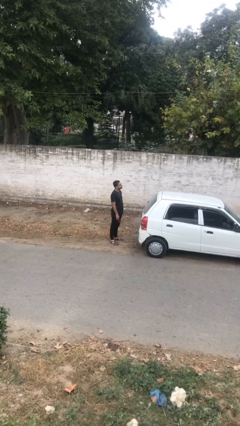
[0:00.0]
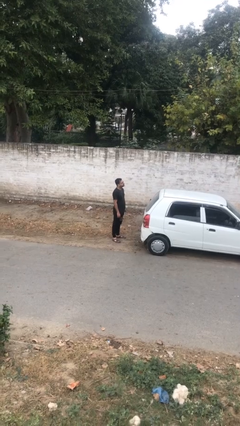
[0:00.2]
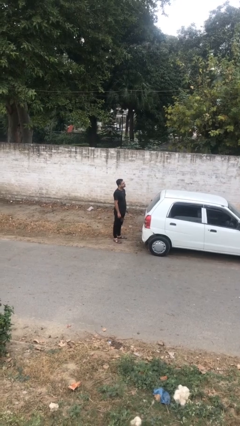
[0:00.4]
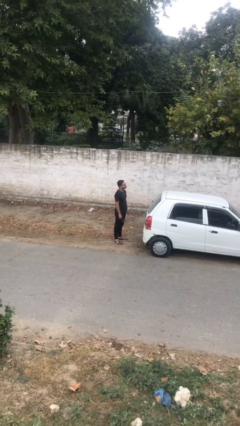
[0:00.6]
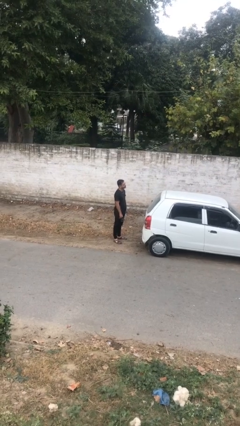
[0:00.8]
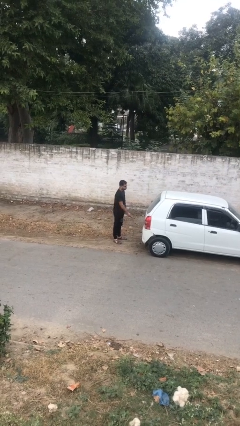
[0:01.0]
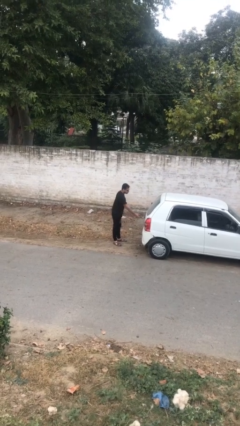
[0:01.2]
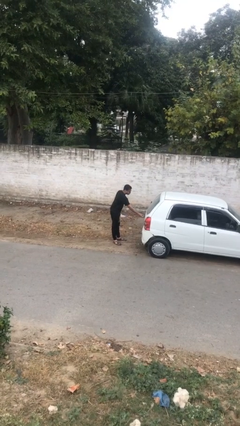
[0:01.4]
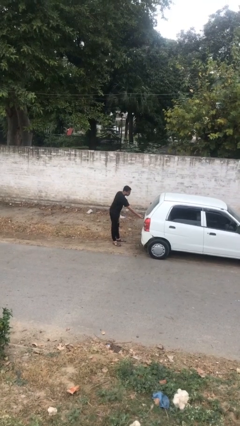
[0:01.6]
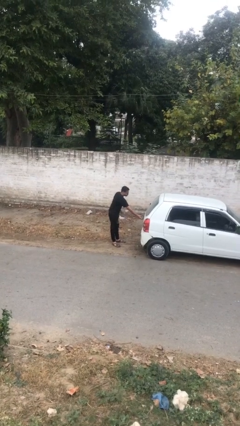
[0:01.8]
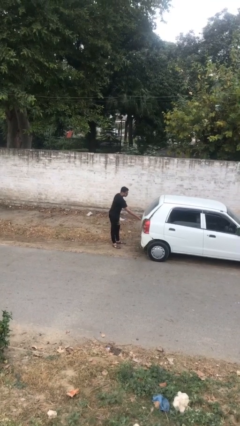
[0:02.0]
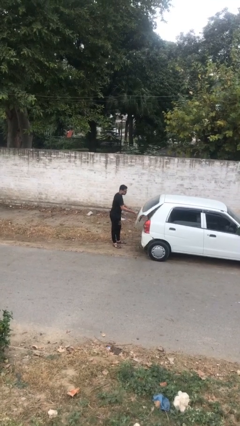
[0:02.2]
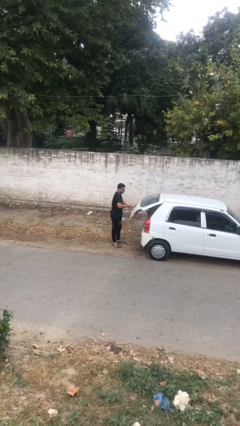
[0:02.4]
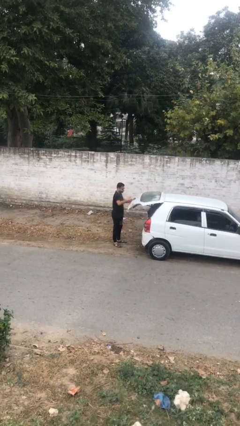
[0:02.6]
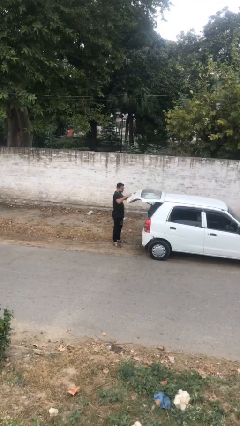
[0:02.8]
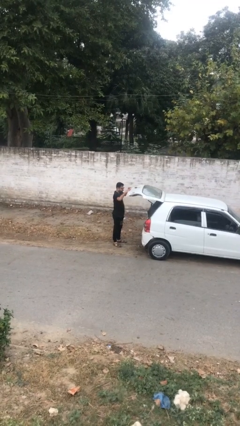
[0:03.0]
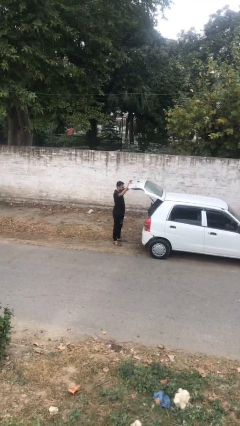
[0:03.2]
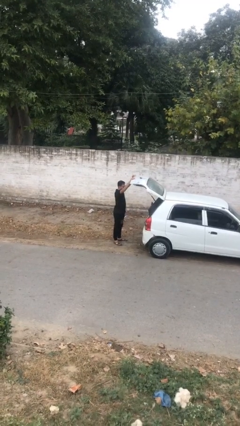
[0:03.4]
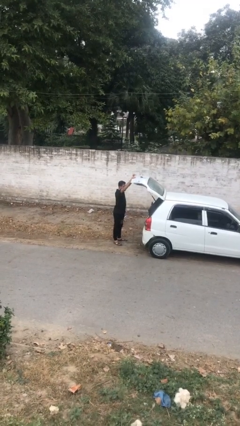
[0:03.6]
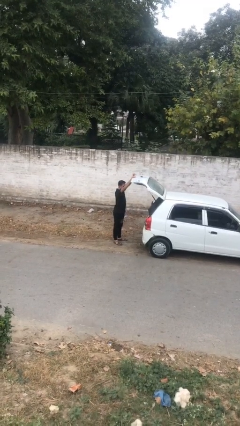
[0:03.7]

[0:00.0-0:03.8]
person opens car trunk

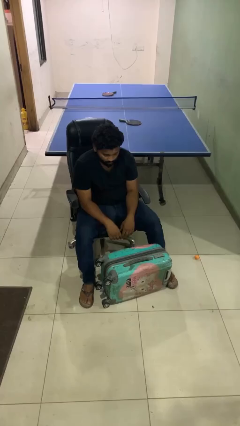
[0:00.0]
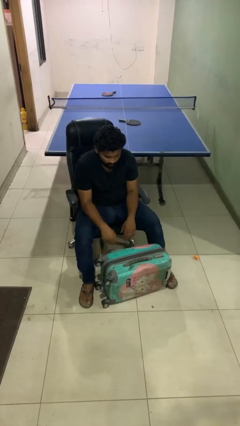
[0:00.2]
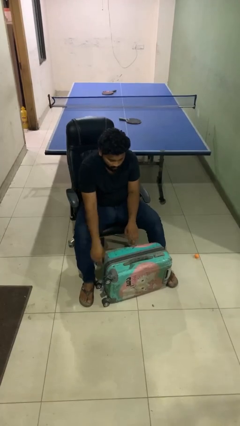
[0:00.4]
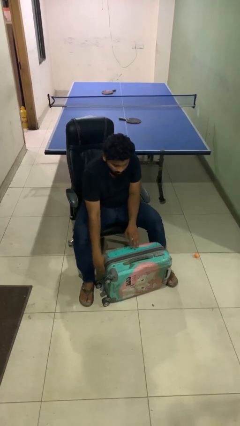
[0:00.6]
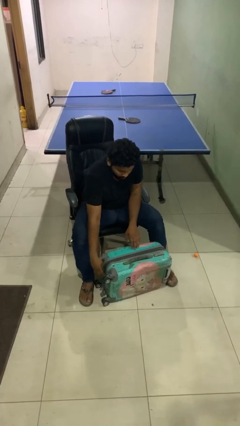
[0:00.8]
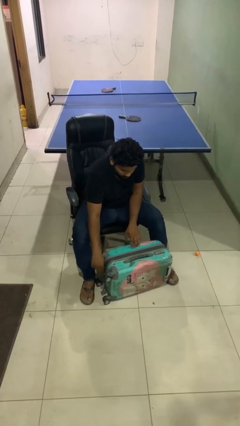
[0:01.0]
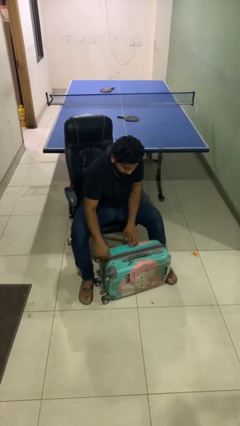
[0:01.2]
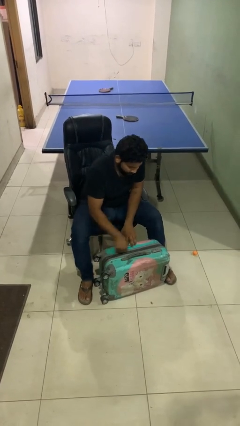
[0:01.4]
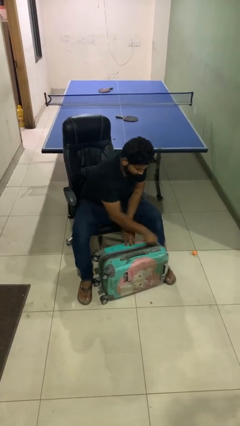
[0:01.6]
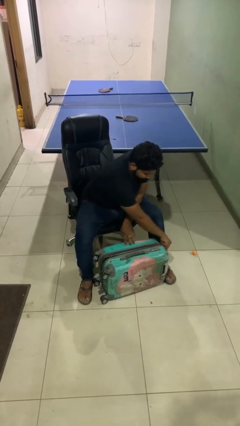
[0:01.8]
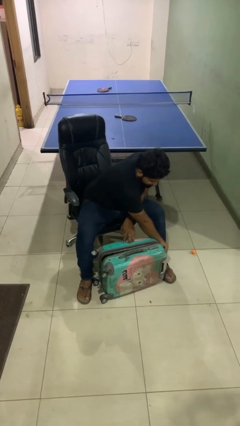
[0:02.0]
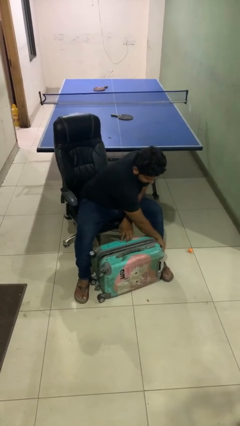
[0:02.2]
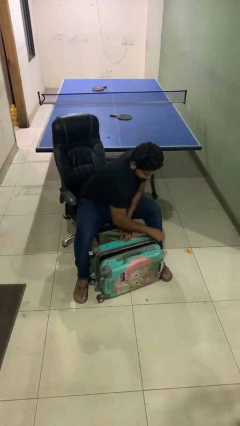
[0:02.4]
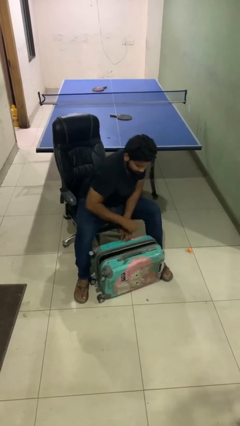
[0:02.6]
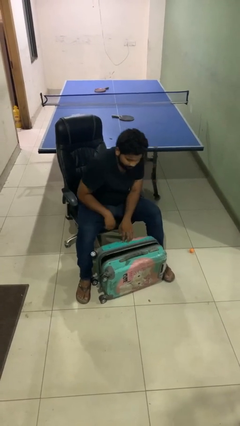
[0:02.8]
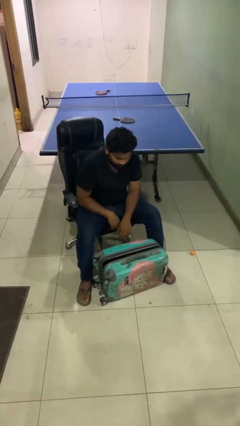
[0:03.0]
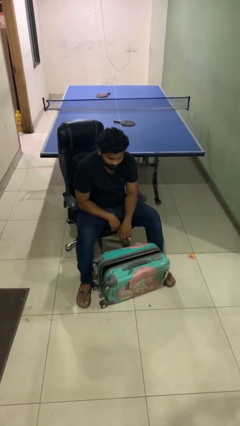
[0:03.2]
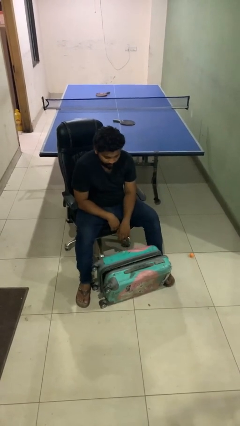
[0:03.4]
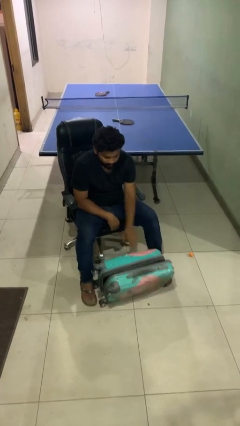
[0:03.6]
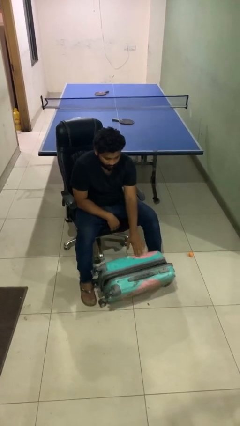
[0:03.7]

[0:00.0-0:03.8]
person opens suitcase

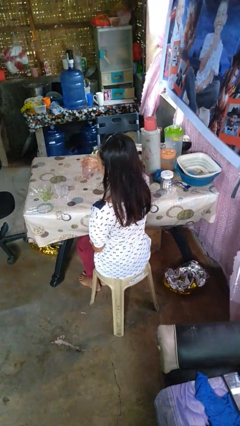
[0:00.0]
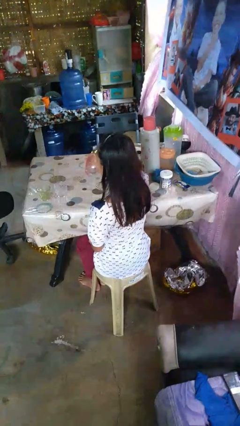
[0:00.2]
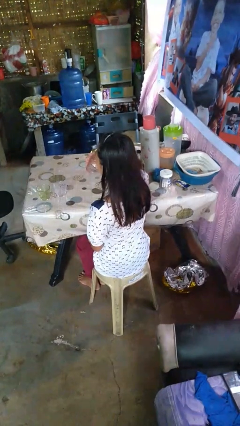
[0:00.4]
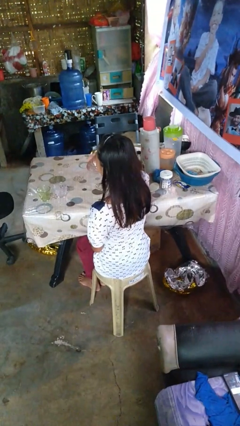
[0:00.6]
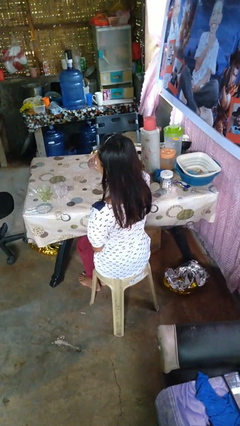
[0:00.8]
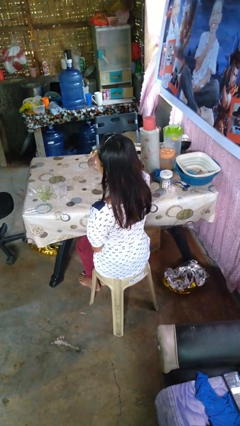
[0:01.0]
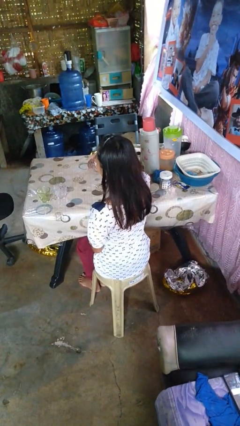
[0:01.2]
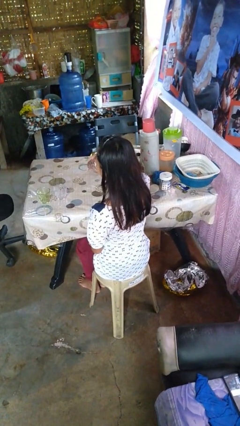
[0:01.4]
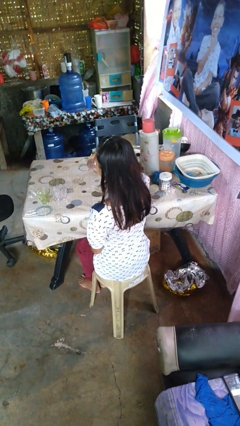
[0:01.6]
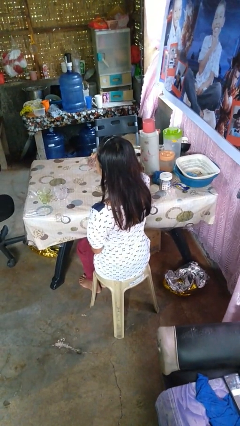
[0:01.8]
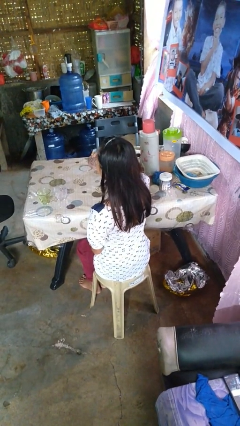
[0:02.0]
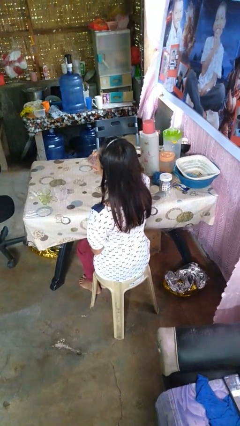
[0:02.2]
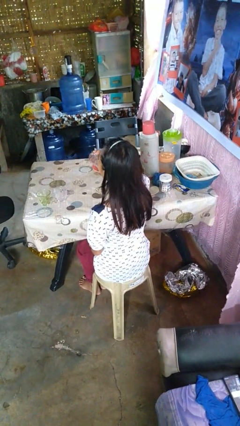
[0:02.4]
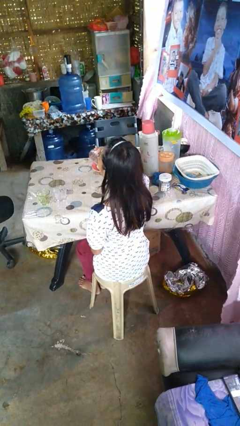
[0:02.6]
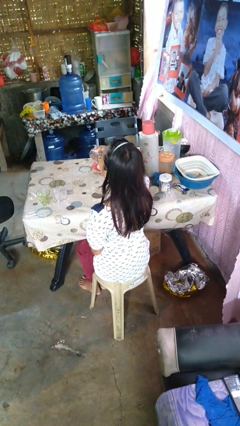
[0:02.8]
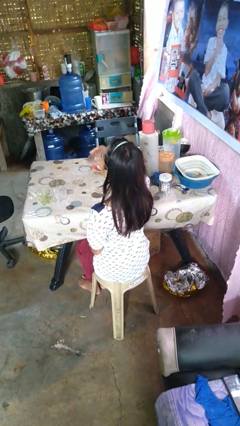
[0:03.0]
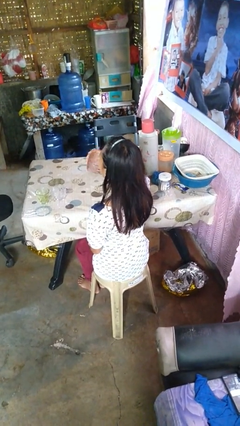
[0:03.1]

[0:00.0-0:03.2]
person drinks from shotglass

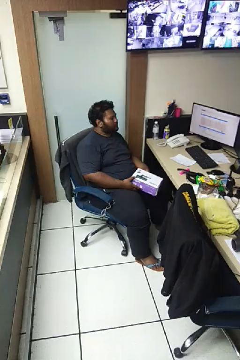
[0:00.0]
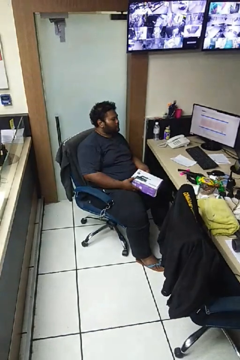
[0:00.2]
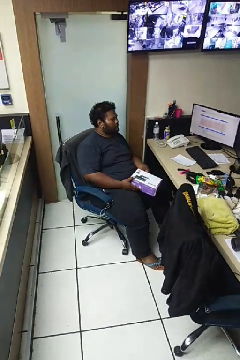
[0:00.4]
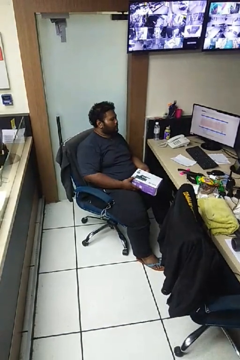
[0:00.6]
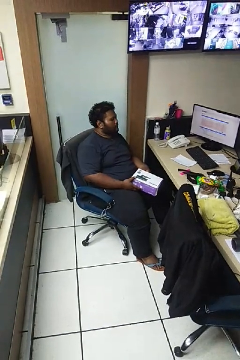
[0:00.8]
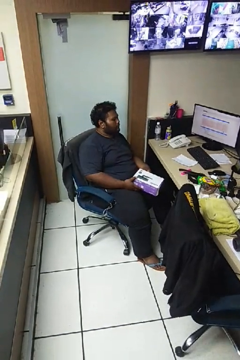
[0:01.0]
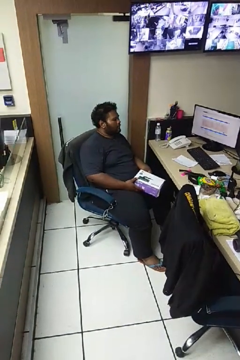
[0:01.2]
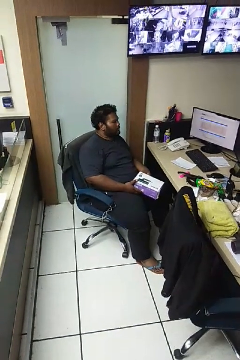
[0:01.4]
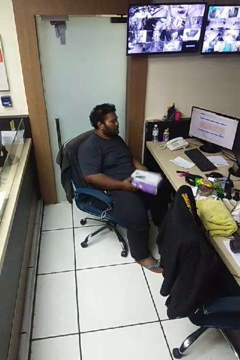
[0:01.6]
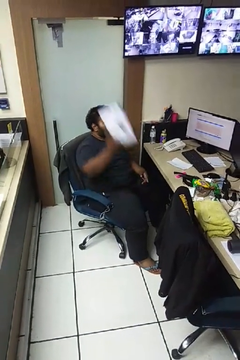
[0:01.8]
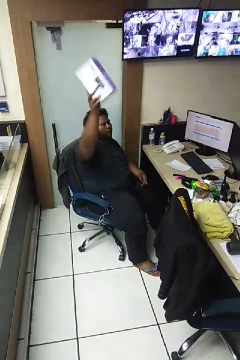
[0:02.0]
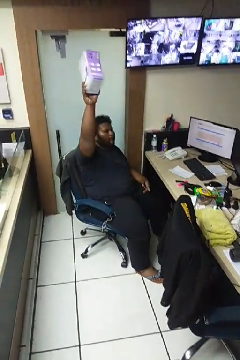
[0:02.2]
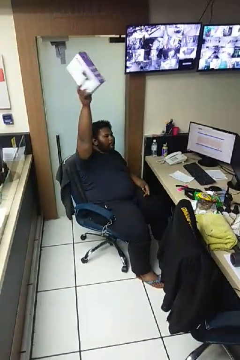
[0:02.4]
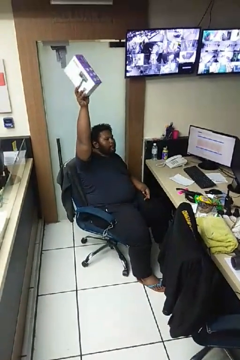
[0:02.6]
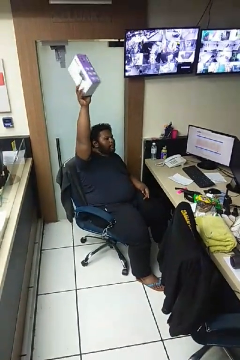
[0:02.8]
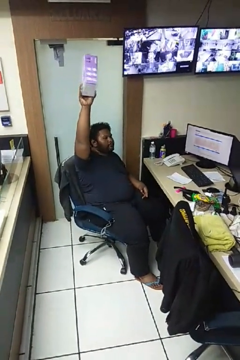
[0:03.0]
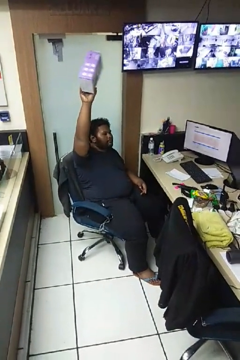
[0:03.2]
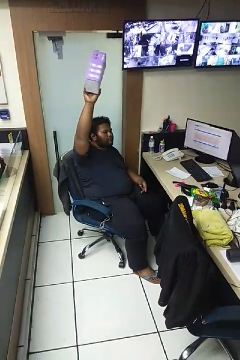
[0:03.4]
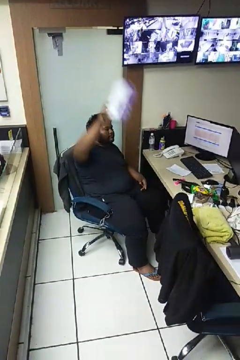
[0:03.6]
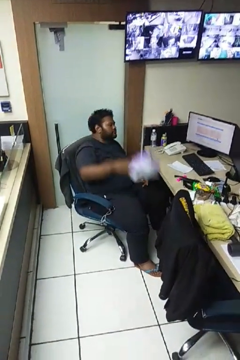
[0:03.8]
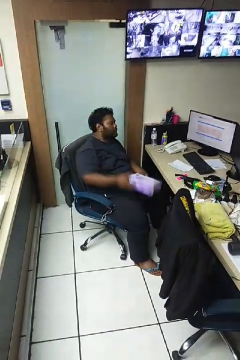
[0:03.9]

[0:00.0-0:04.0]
person holds object above head

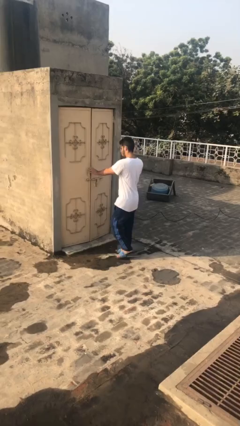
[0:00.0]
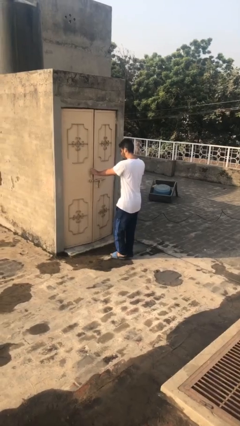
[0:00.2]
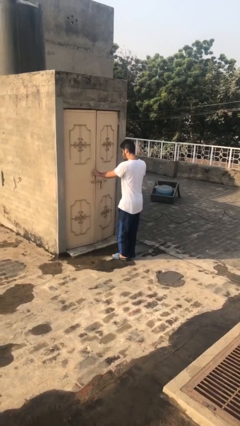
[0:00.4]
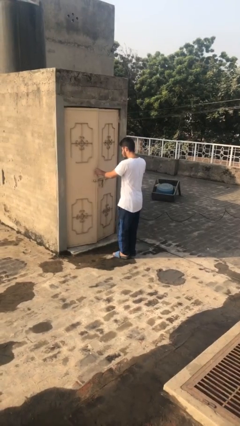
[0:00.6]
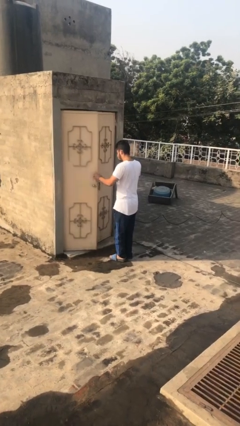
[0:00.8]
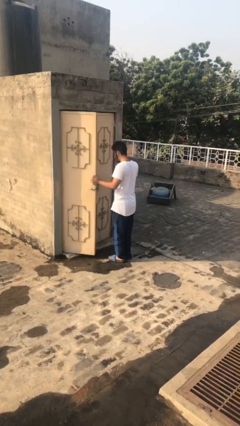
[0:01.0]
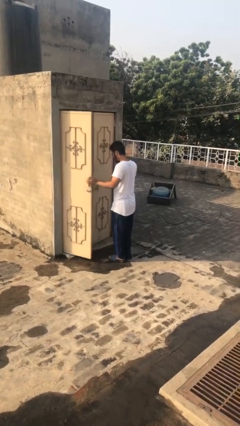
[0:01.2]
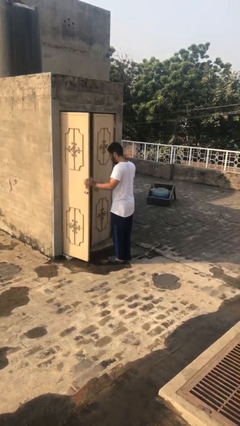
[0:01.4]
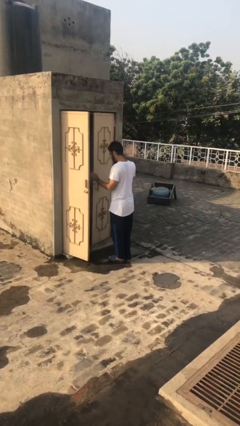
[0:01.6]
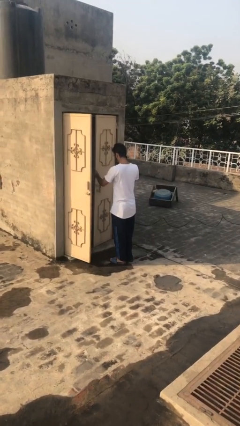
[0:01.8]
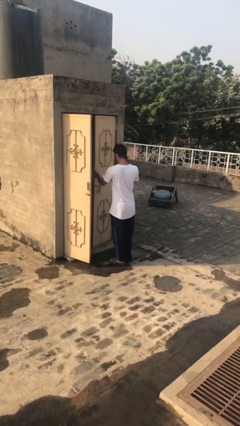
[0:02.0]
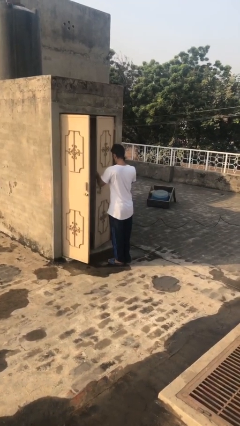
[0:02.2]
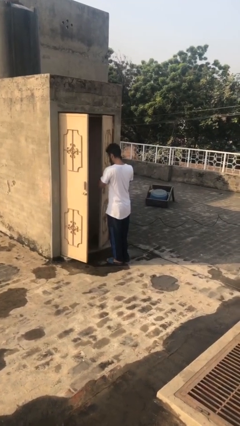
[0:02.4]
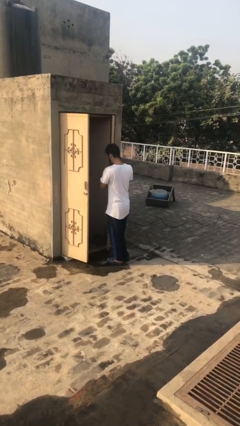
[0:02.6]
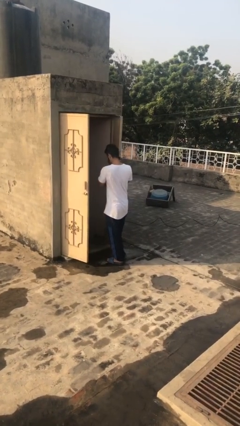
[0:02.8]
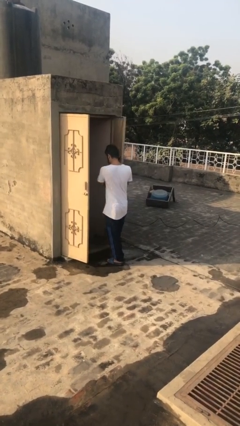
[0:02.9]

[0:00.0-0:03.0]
person opens facility door

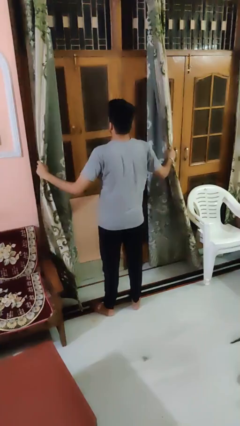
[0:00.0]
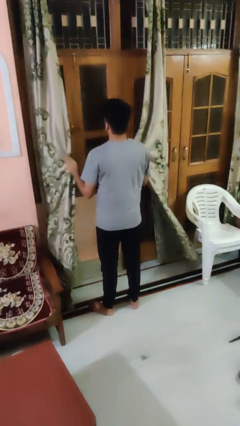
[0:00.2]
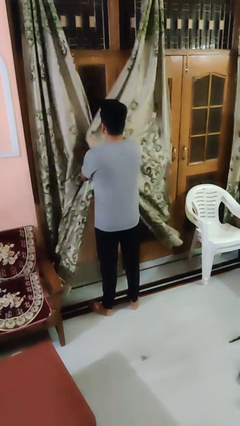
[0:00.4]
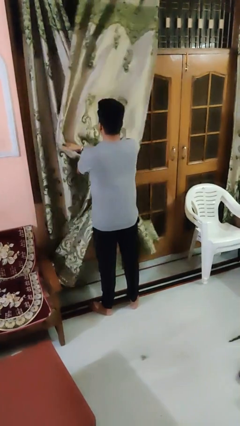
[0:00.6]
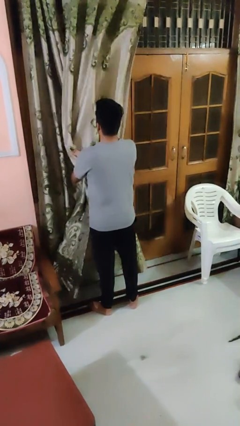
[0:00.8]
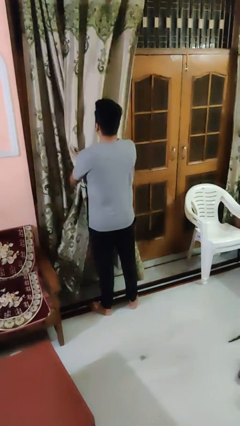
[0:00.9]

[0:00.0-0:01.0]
person closes curtains
